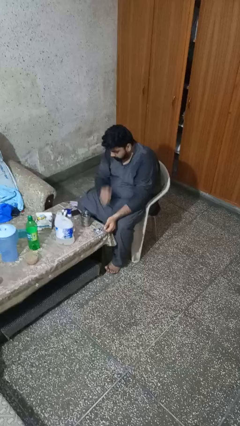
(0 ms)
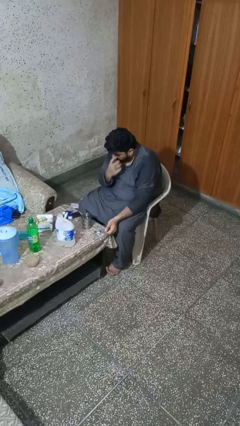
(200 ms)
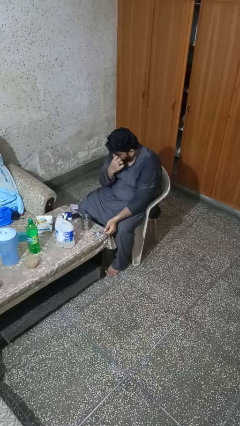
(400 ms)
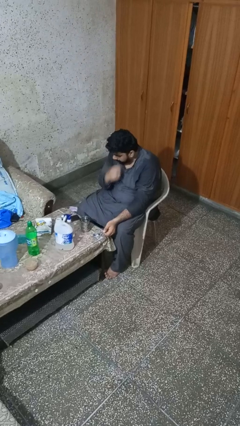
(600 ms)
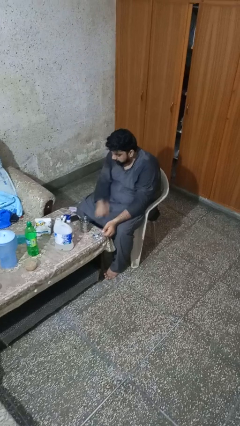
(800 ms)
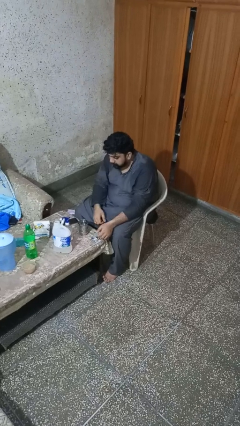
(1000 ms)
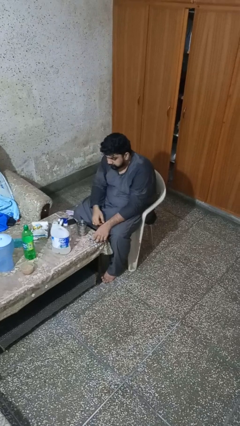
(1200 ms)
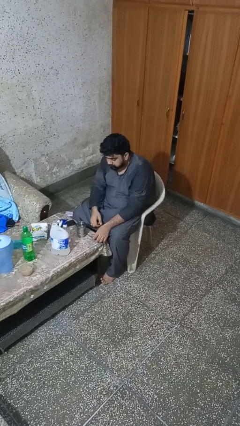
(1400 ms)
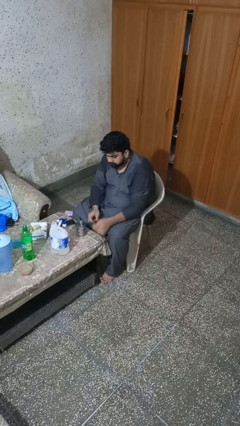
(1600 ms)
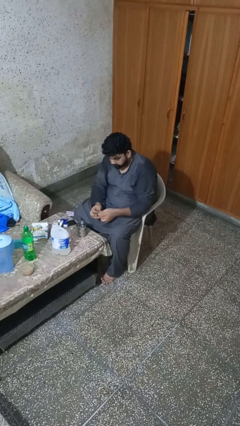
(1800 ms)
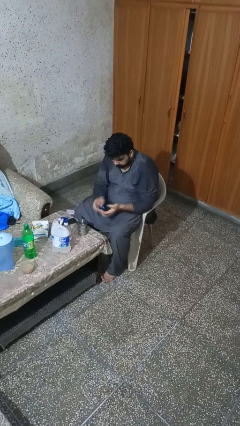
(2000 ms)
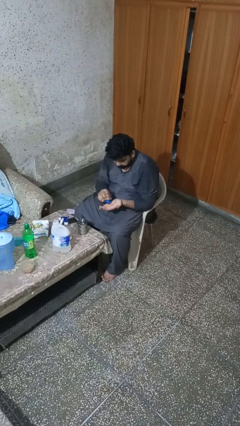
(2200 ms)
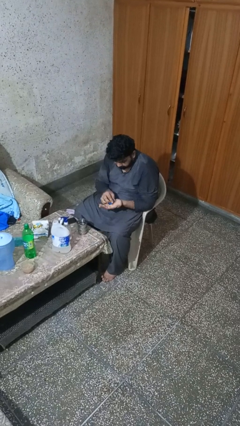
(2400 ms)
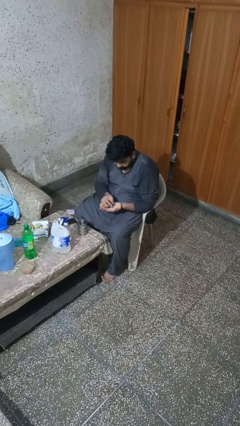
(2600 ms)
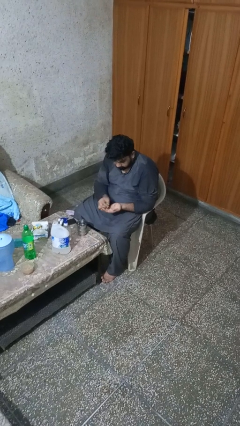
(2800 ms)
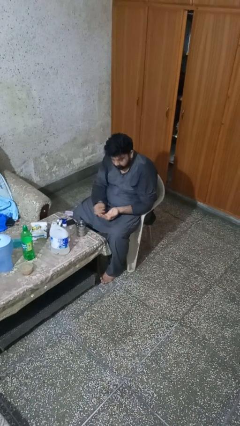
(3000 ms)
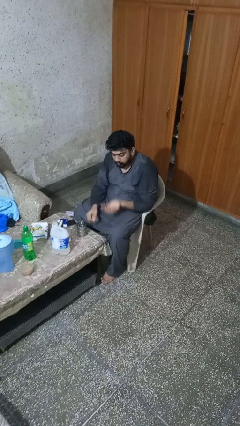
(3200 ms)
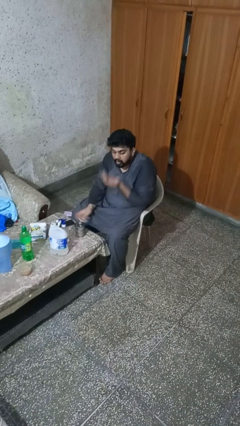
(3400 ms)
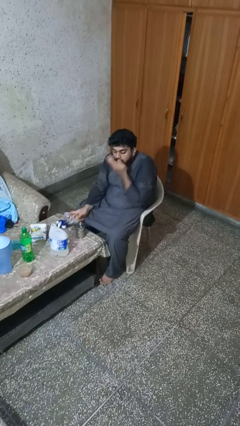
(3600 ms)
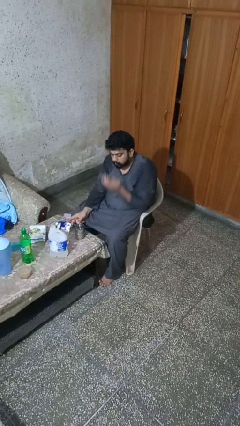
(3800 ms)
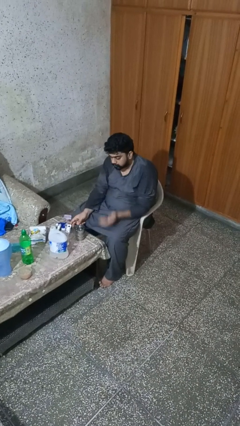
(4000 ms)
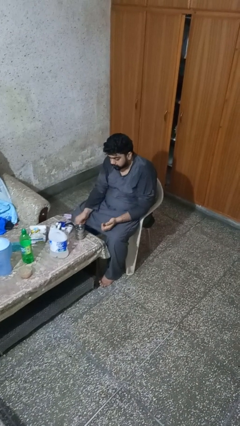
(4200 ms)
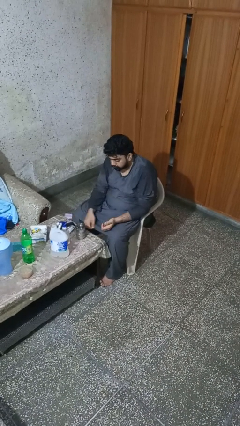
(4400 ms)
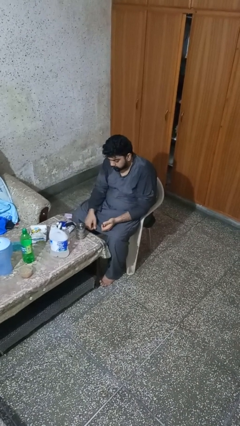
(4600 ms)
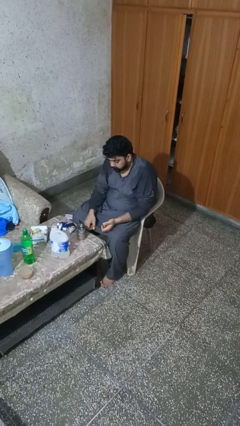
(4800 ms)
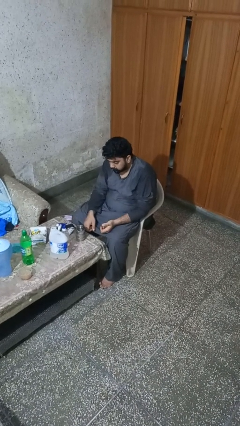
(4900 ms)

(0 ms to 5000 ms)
person takes medicine pills

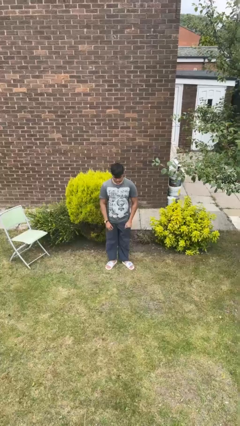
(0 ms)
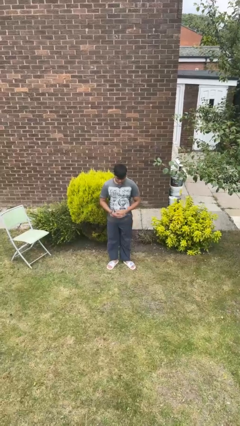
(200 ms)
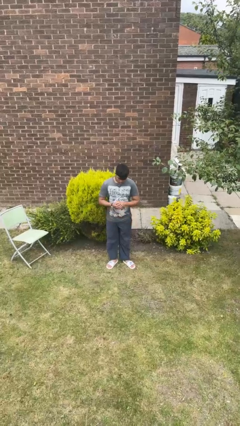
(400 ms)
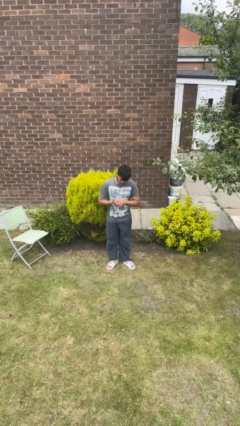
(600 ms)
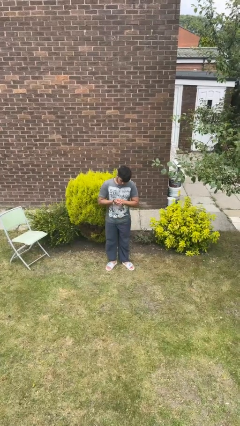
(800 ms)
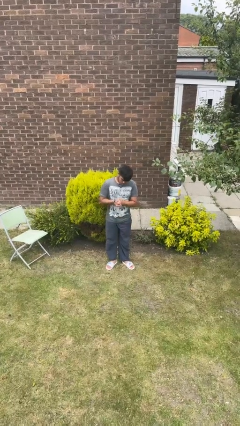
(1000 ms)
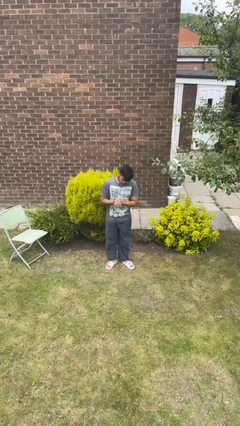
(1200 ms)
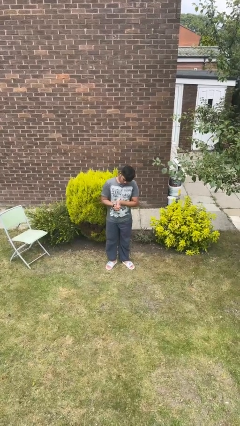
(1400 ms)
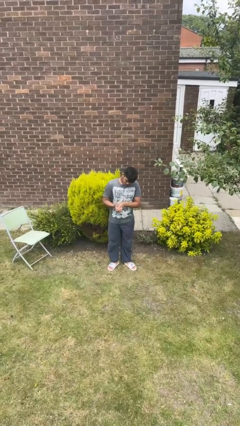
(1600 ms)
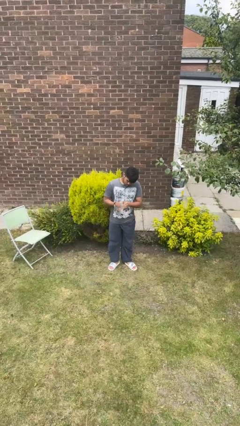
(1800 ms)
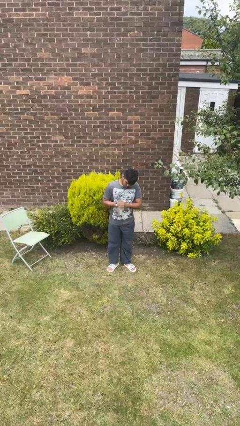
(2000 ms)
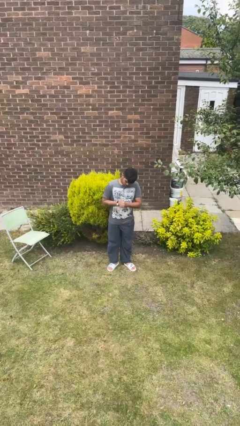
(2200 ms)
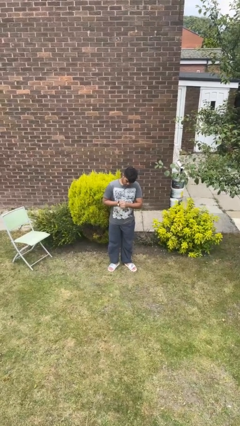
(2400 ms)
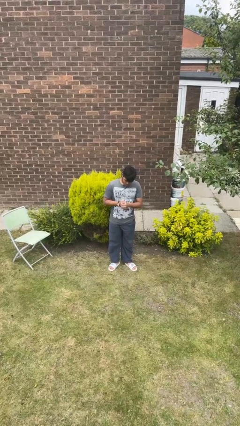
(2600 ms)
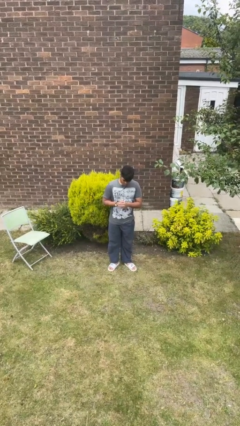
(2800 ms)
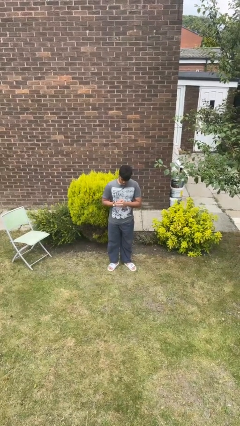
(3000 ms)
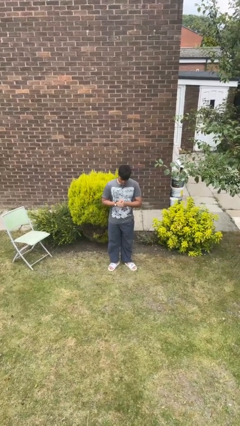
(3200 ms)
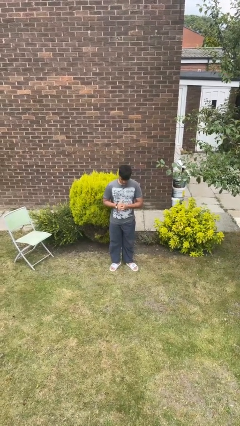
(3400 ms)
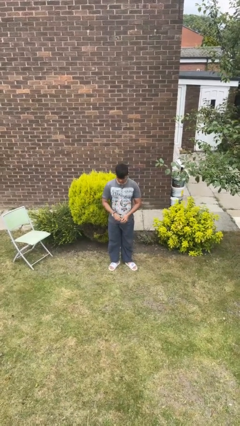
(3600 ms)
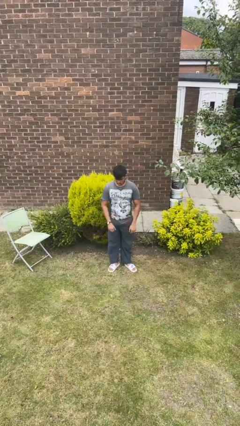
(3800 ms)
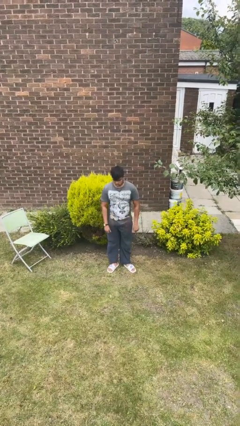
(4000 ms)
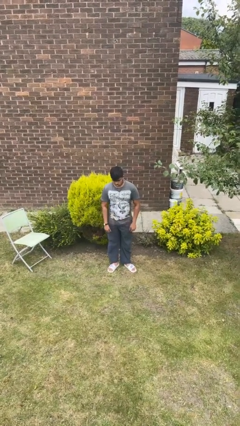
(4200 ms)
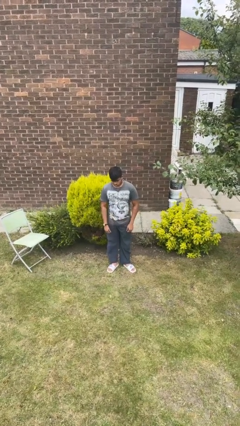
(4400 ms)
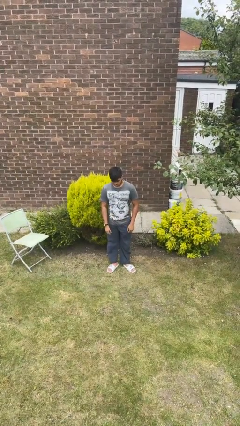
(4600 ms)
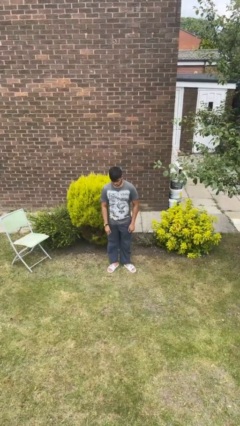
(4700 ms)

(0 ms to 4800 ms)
person cracks knuckles

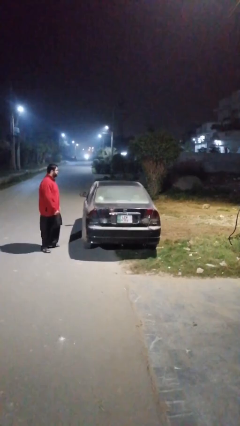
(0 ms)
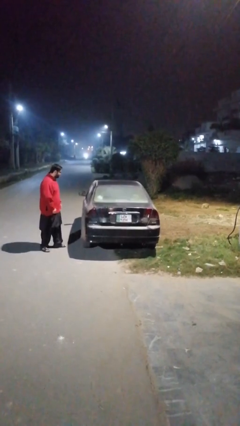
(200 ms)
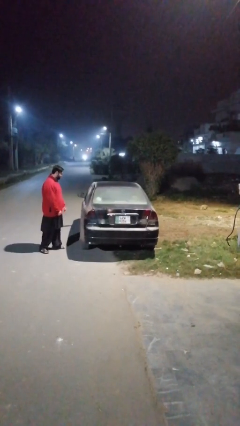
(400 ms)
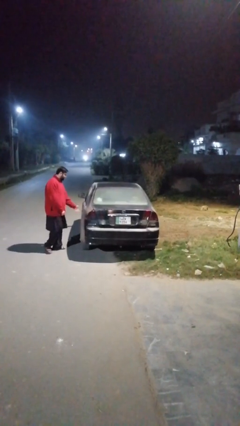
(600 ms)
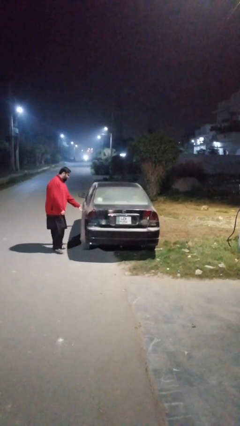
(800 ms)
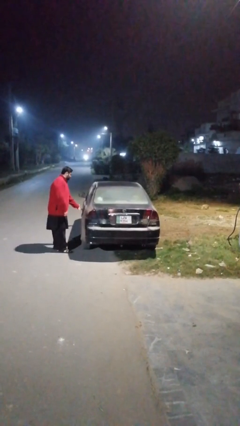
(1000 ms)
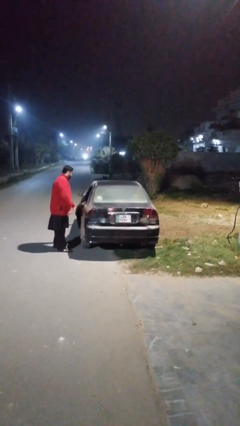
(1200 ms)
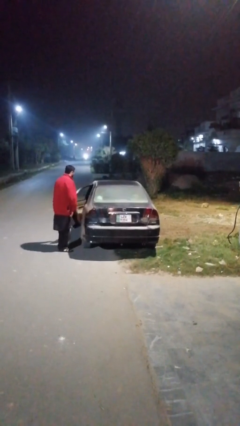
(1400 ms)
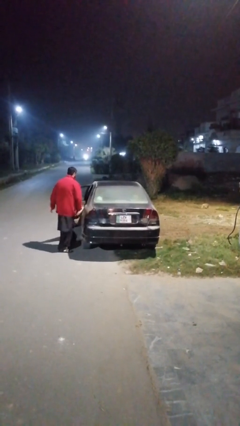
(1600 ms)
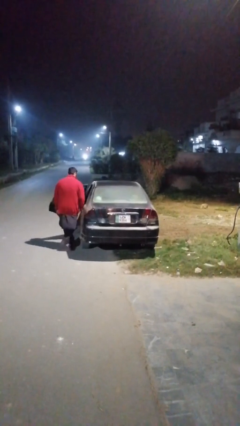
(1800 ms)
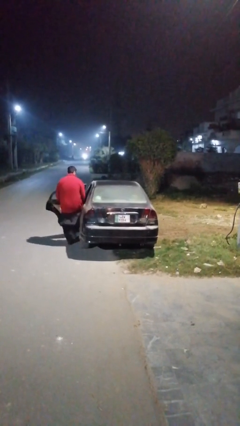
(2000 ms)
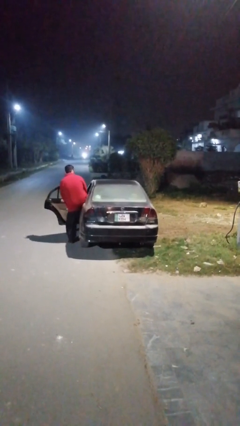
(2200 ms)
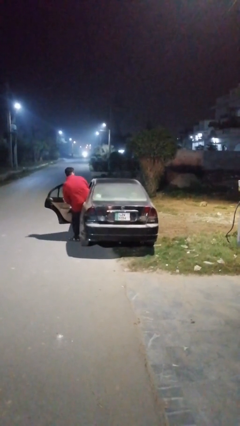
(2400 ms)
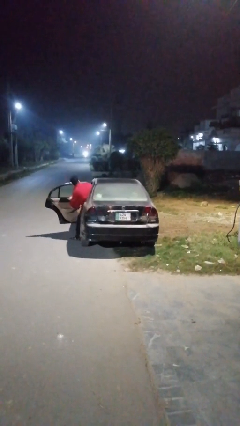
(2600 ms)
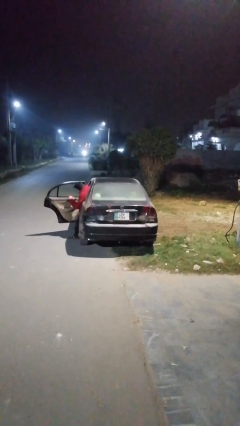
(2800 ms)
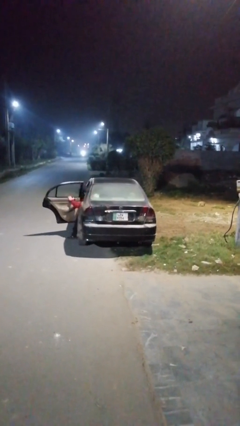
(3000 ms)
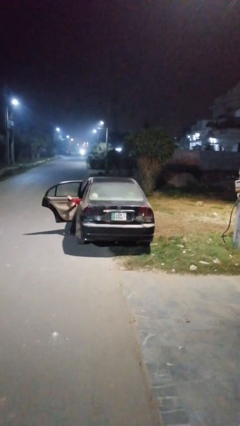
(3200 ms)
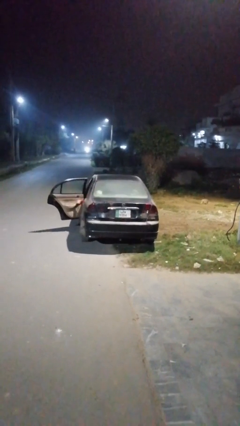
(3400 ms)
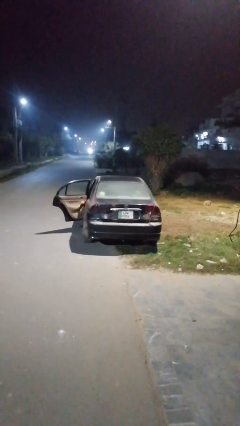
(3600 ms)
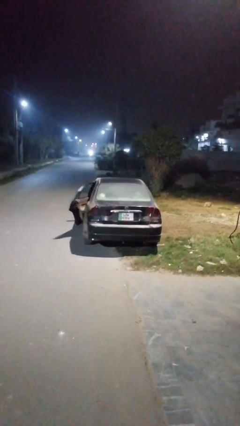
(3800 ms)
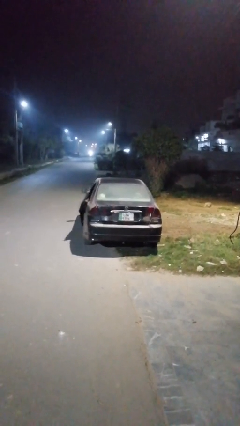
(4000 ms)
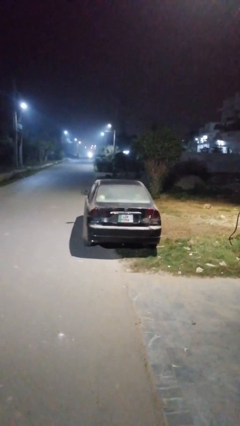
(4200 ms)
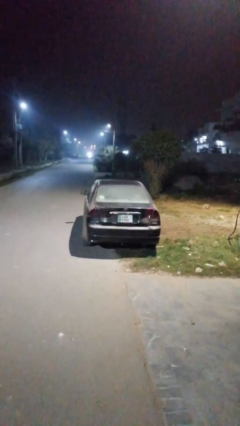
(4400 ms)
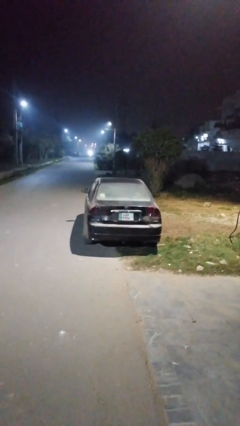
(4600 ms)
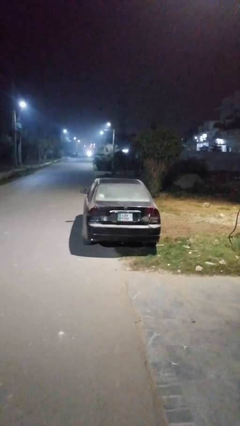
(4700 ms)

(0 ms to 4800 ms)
car picks up person

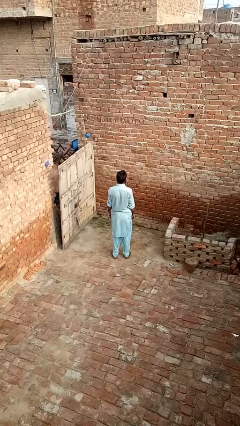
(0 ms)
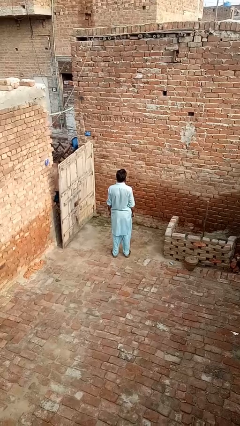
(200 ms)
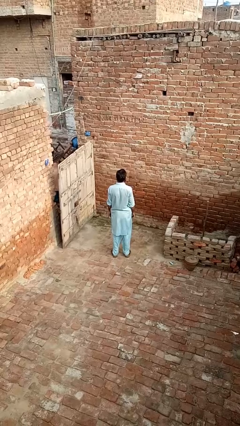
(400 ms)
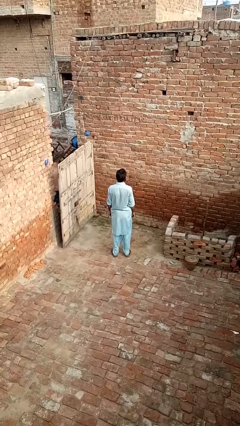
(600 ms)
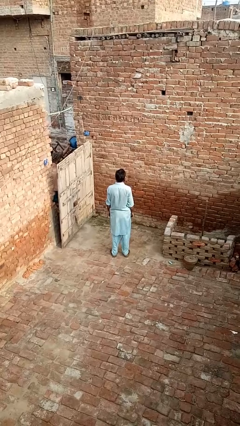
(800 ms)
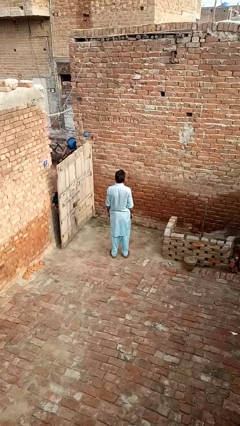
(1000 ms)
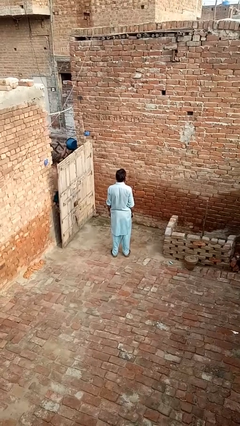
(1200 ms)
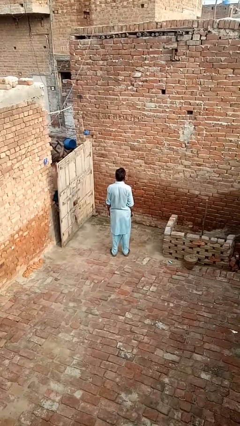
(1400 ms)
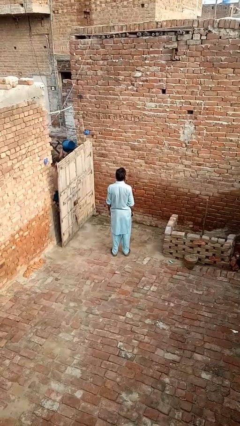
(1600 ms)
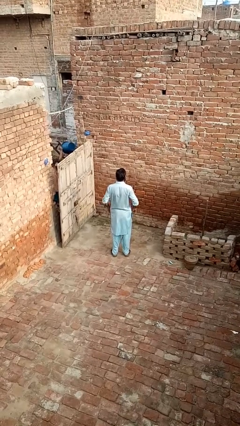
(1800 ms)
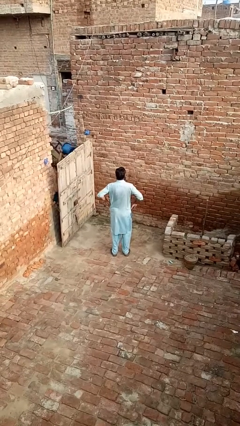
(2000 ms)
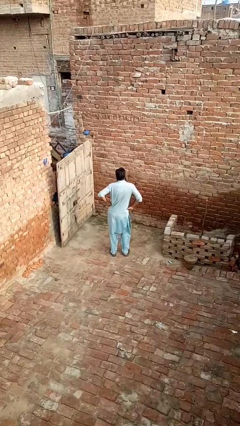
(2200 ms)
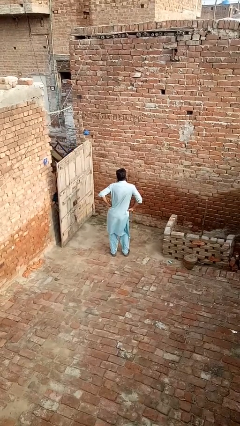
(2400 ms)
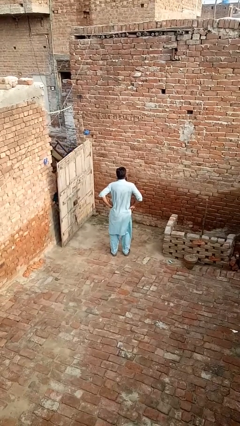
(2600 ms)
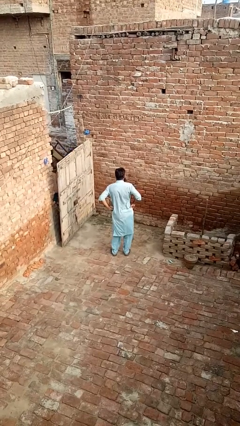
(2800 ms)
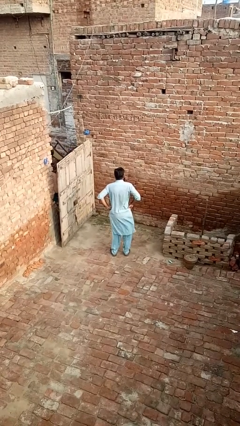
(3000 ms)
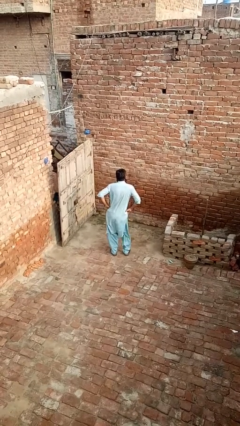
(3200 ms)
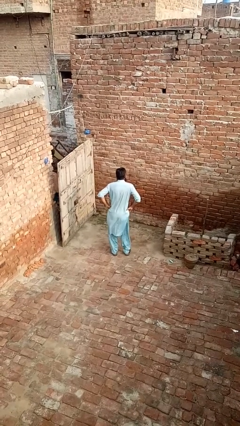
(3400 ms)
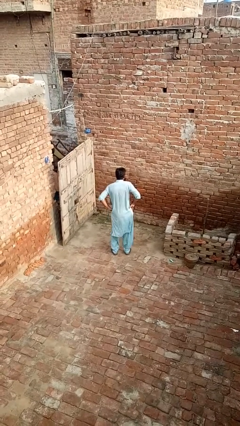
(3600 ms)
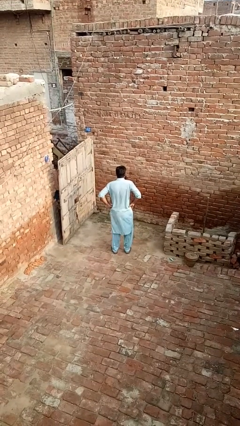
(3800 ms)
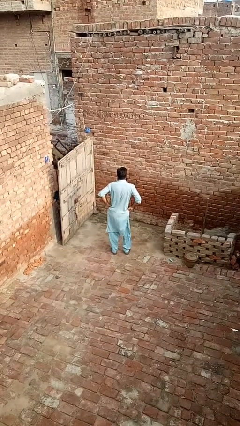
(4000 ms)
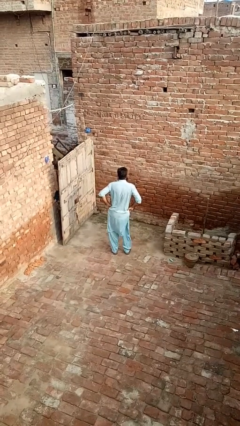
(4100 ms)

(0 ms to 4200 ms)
person wiggles hips
